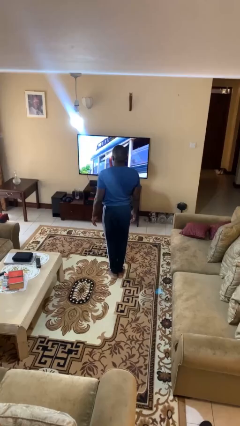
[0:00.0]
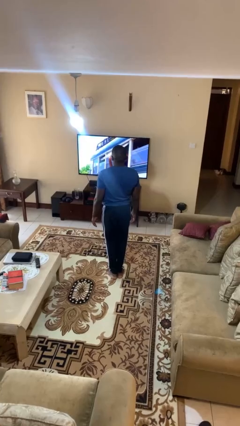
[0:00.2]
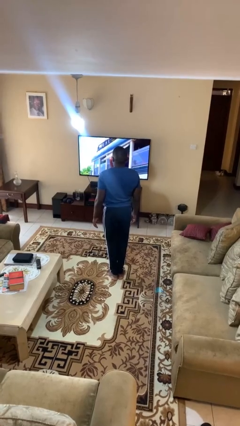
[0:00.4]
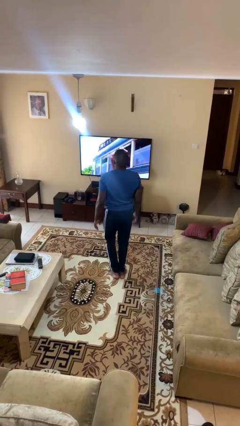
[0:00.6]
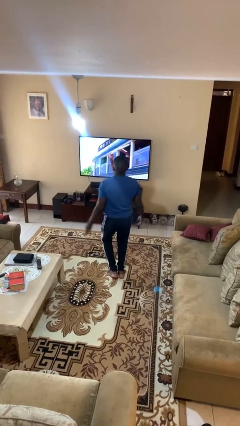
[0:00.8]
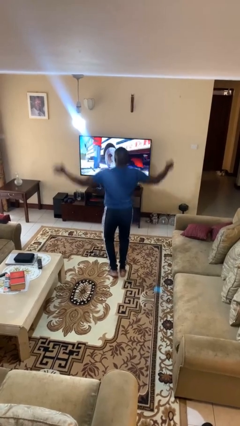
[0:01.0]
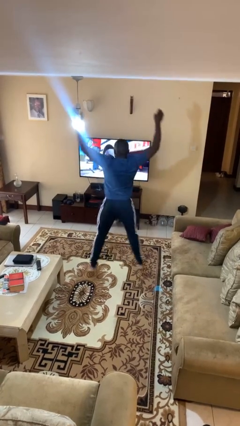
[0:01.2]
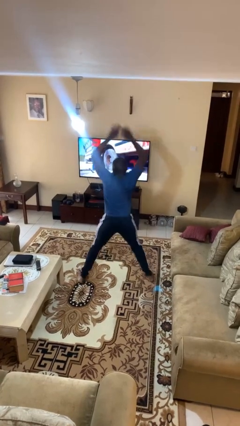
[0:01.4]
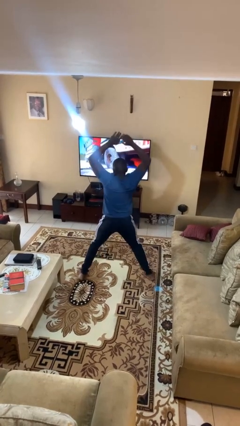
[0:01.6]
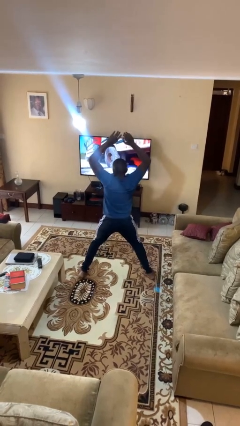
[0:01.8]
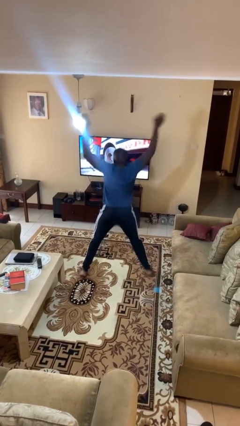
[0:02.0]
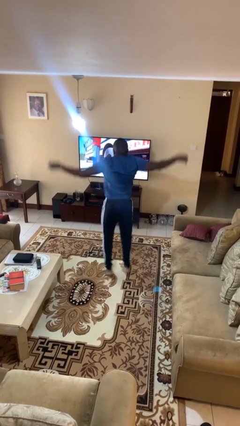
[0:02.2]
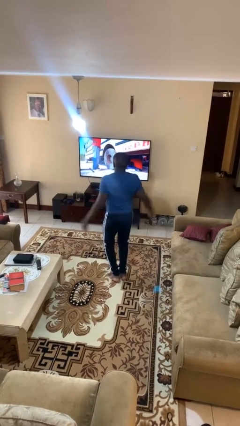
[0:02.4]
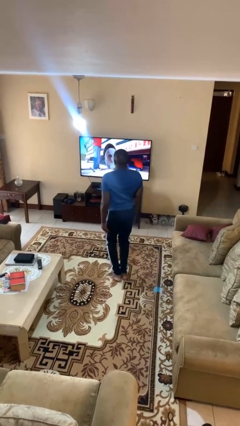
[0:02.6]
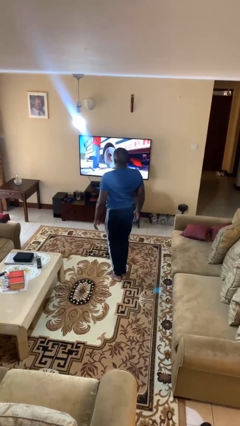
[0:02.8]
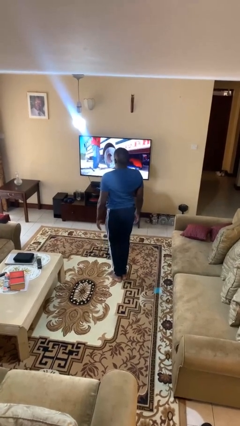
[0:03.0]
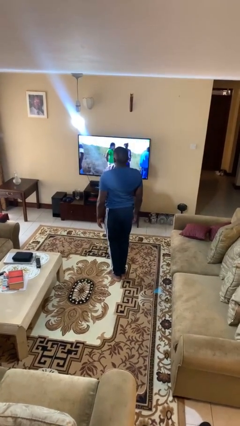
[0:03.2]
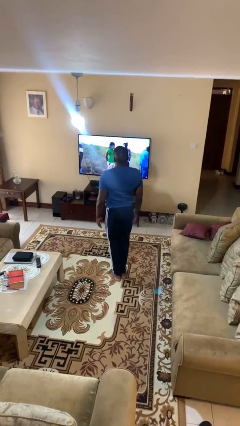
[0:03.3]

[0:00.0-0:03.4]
person exercises with jumping jacks

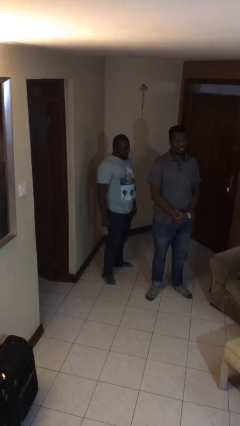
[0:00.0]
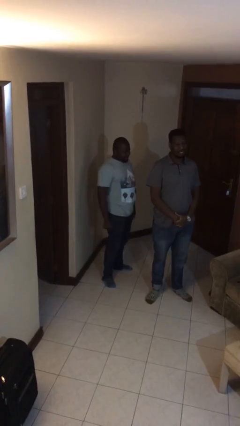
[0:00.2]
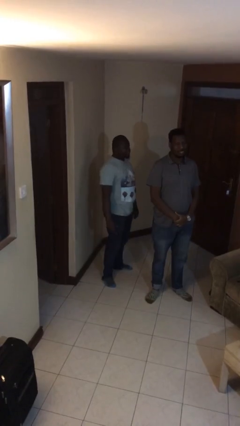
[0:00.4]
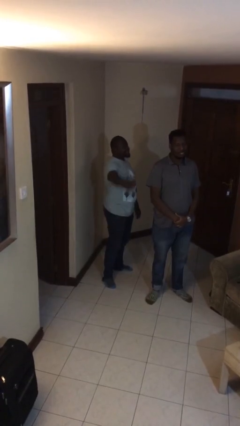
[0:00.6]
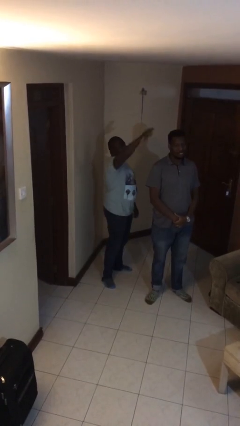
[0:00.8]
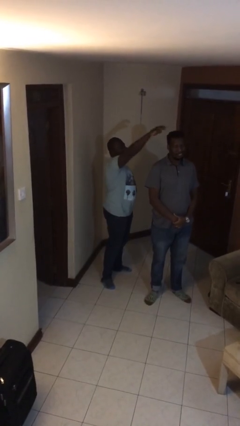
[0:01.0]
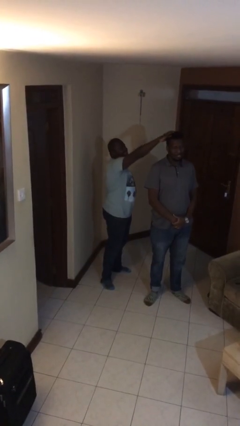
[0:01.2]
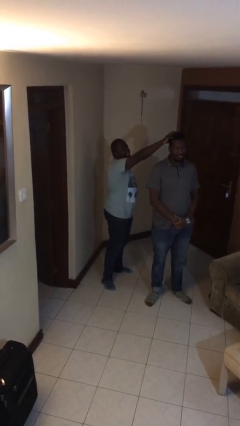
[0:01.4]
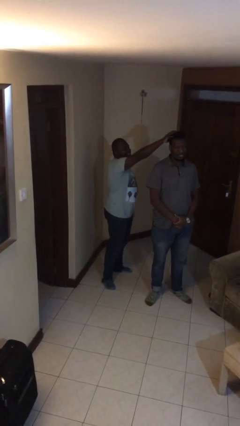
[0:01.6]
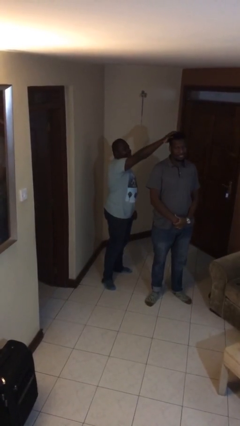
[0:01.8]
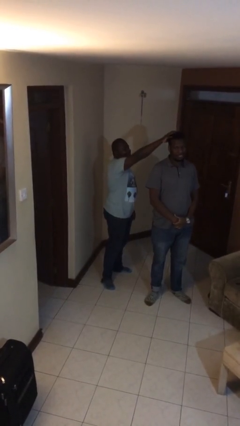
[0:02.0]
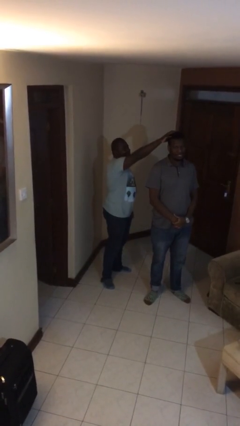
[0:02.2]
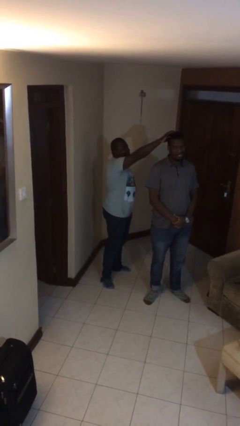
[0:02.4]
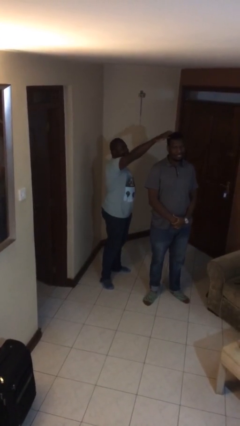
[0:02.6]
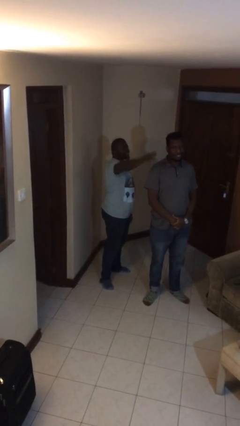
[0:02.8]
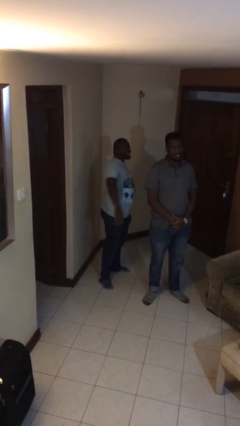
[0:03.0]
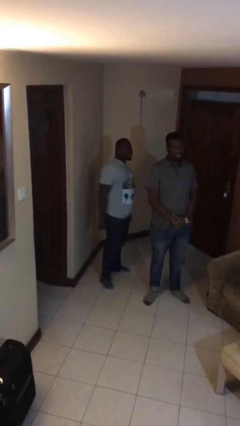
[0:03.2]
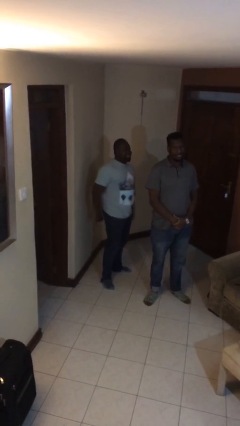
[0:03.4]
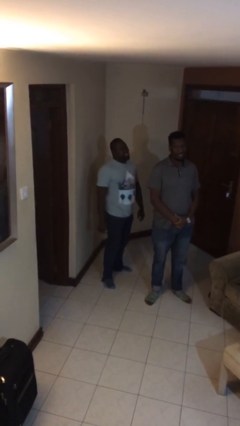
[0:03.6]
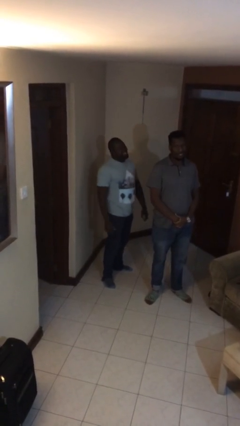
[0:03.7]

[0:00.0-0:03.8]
person grabs person by hair

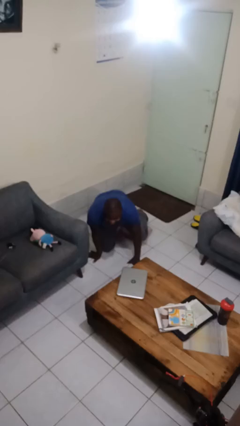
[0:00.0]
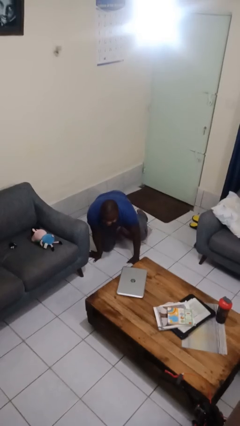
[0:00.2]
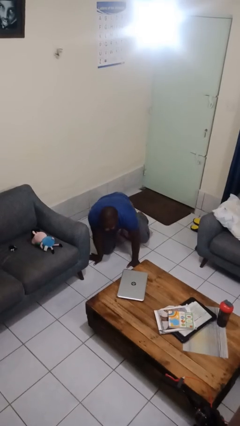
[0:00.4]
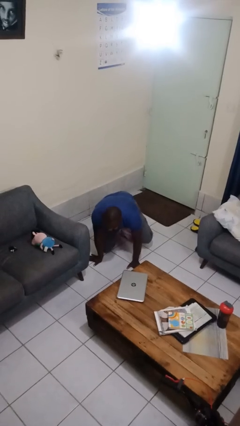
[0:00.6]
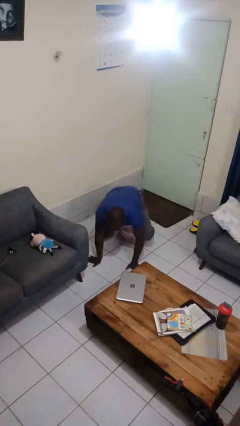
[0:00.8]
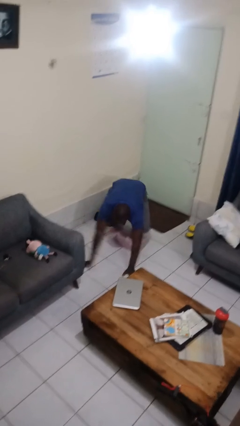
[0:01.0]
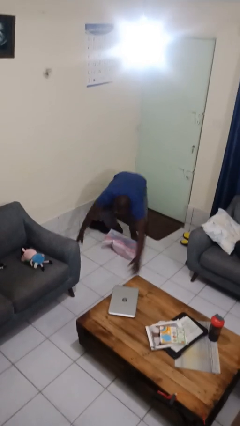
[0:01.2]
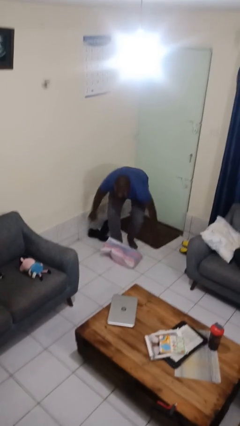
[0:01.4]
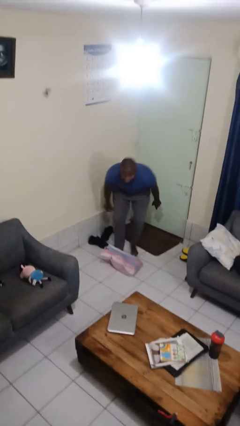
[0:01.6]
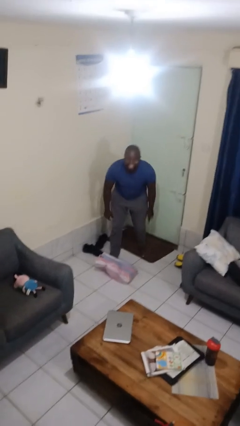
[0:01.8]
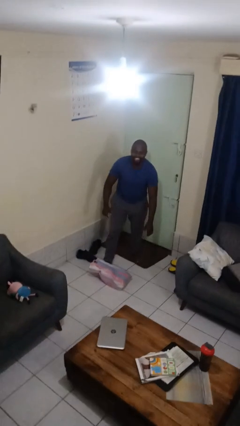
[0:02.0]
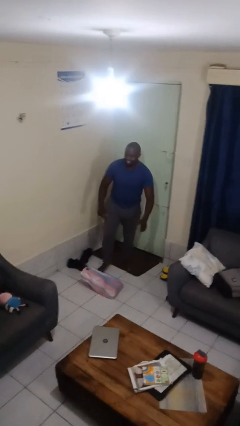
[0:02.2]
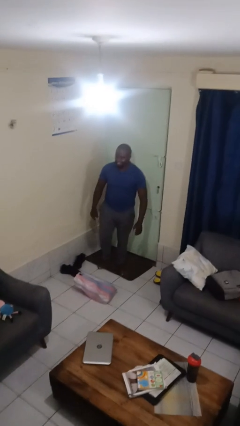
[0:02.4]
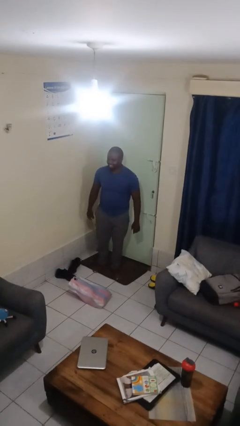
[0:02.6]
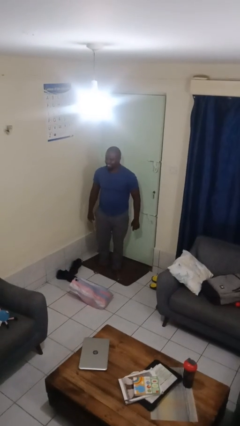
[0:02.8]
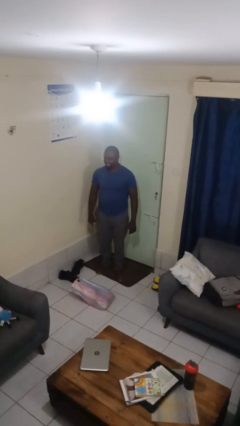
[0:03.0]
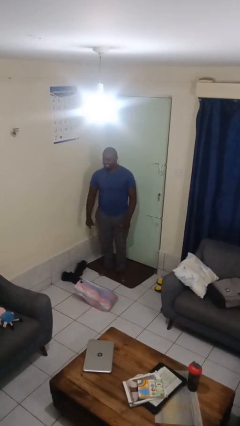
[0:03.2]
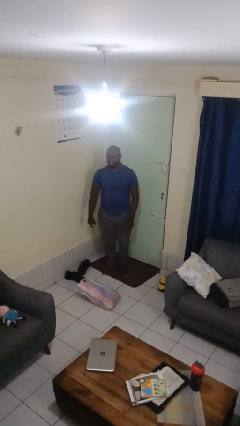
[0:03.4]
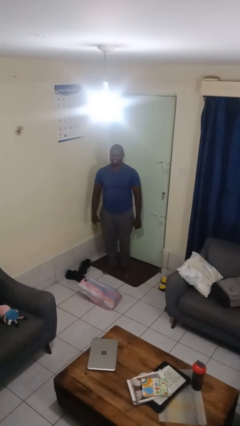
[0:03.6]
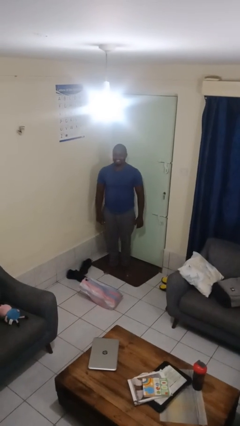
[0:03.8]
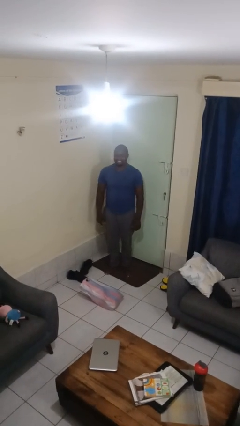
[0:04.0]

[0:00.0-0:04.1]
person stands up from floor

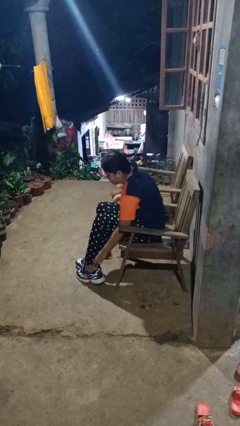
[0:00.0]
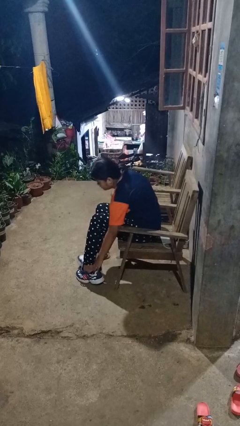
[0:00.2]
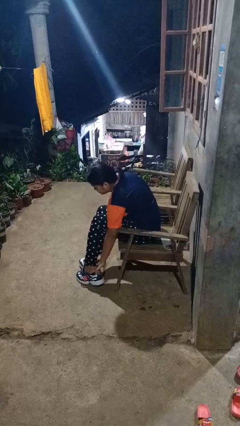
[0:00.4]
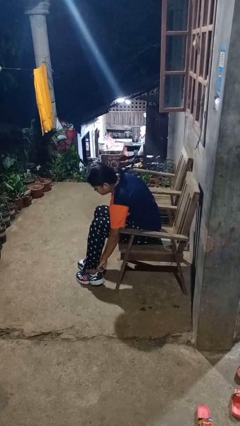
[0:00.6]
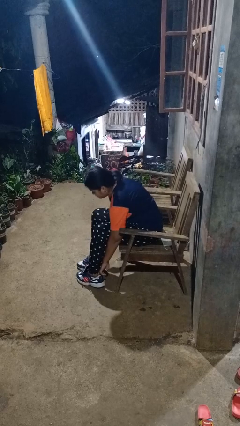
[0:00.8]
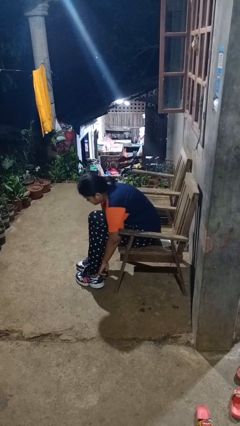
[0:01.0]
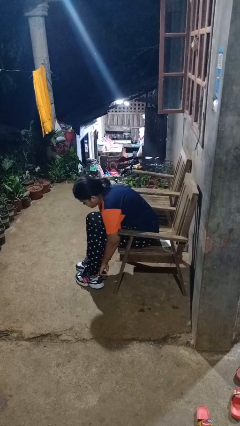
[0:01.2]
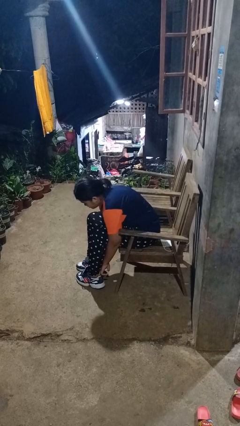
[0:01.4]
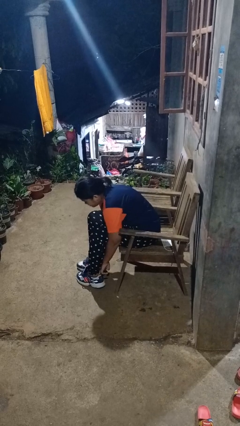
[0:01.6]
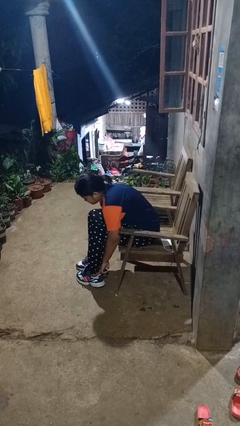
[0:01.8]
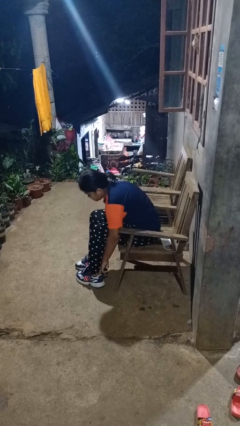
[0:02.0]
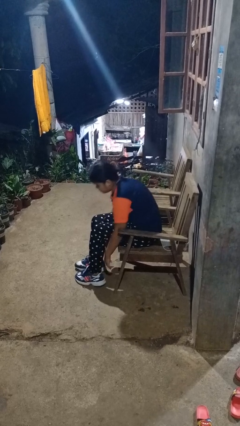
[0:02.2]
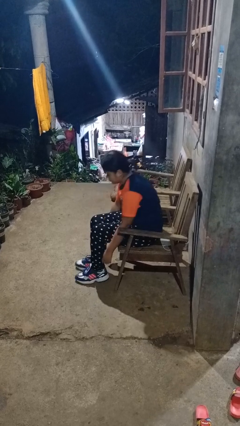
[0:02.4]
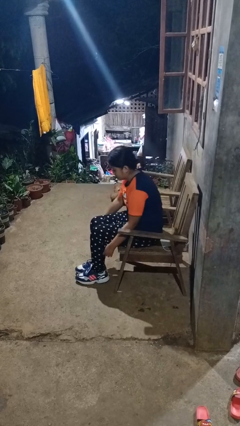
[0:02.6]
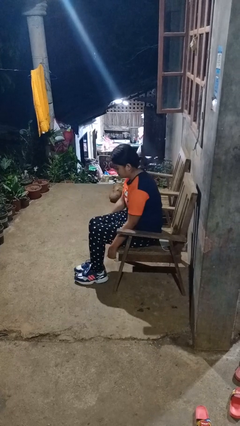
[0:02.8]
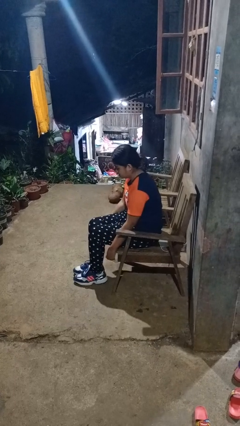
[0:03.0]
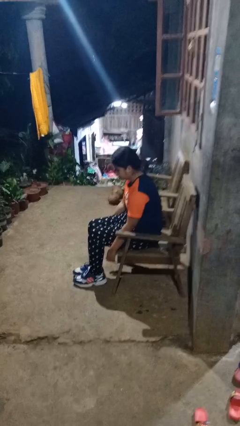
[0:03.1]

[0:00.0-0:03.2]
person puts on shoes

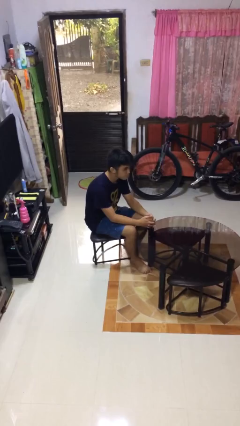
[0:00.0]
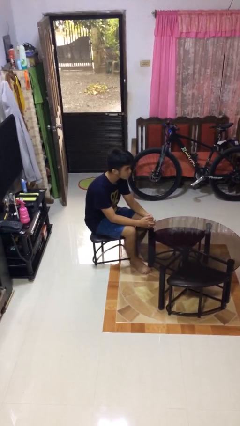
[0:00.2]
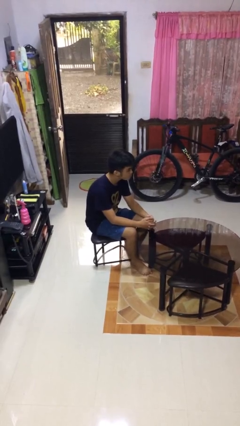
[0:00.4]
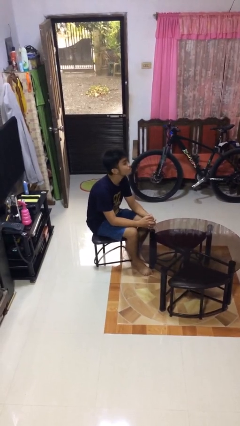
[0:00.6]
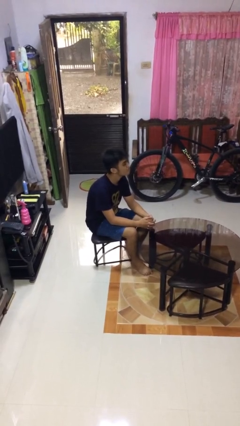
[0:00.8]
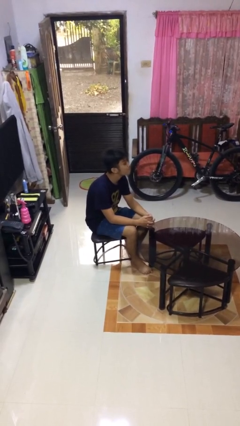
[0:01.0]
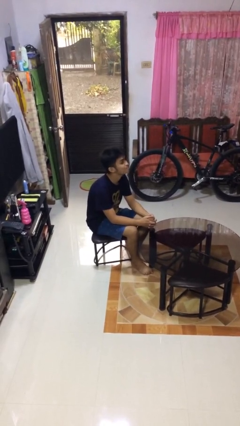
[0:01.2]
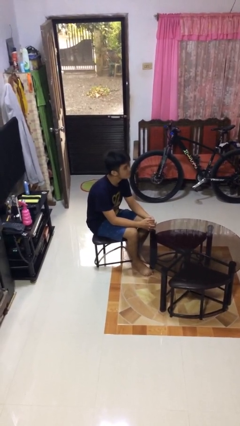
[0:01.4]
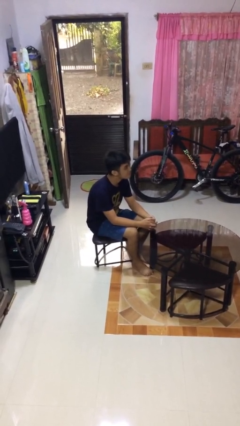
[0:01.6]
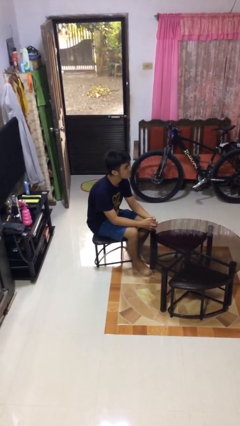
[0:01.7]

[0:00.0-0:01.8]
person nods head

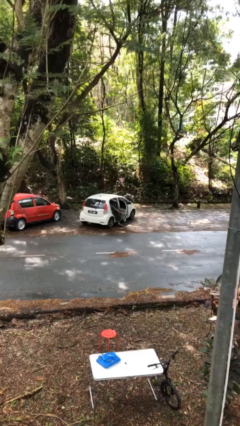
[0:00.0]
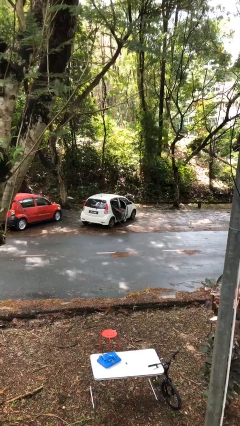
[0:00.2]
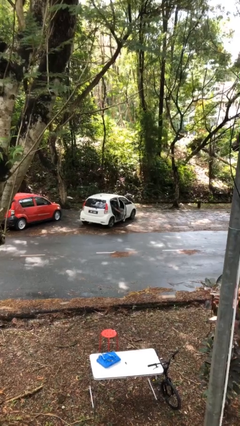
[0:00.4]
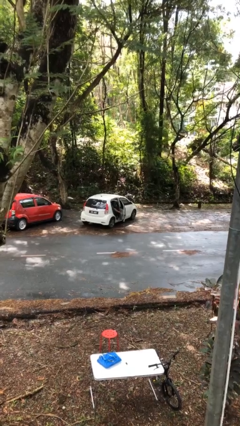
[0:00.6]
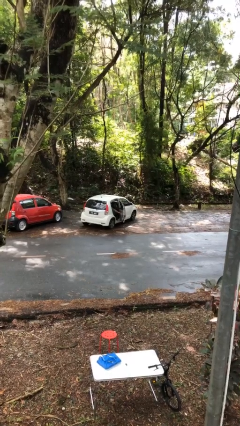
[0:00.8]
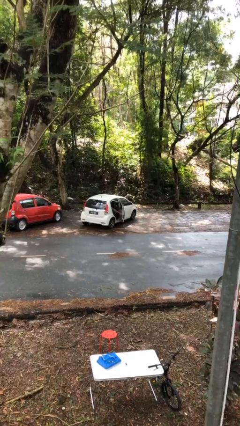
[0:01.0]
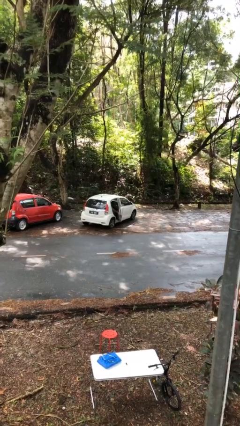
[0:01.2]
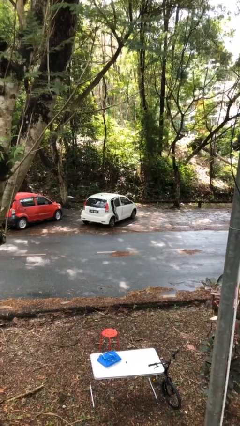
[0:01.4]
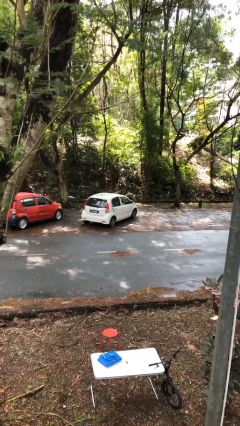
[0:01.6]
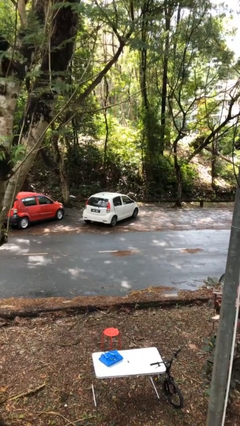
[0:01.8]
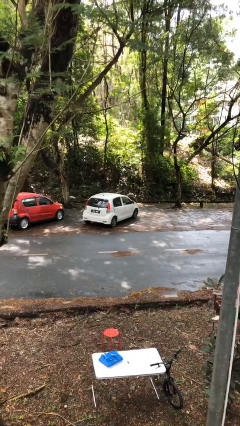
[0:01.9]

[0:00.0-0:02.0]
person closes car door
